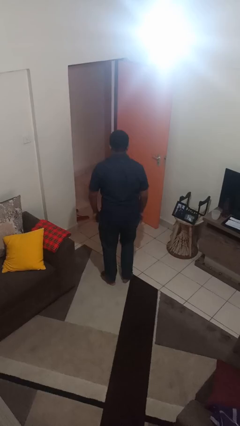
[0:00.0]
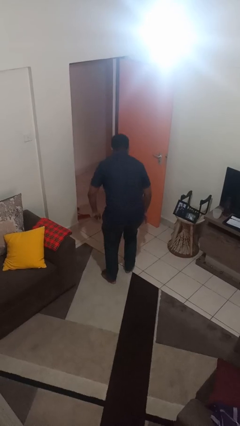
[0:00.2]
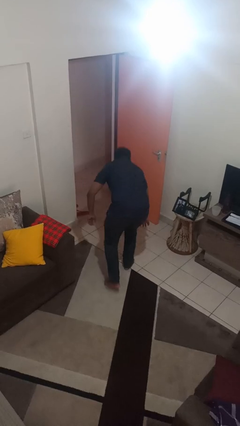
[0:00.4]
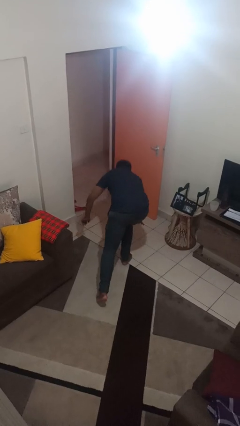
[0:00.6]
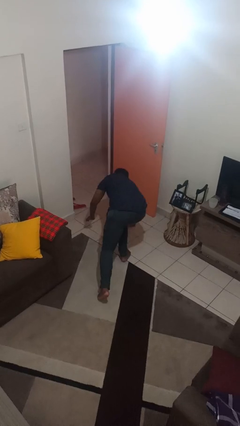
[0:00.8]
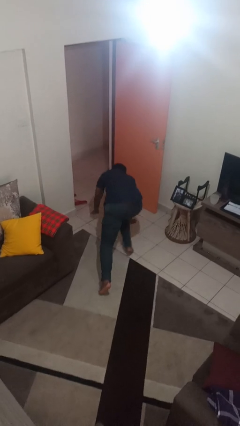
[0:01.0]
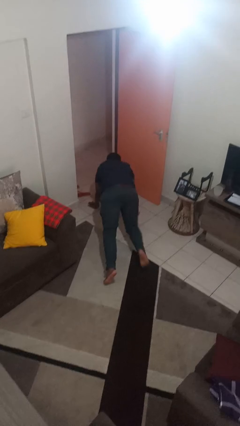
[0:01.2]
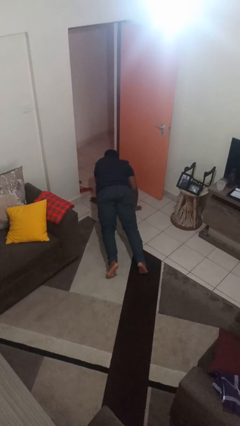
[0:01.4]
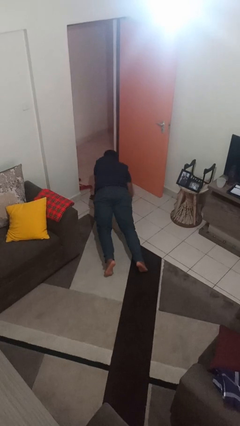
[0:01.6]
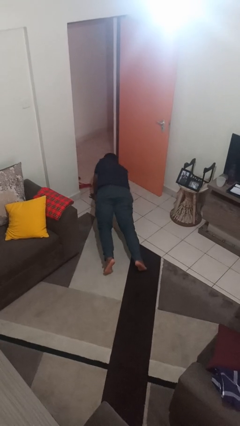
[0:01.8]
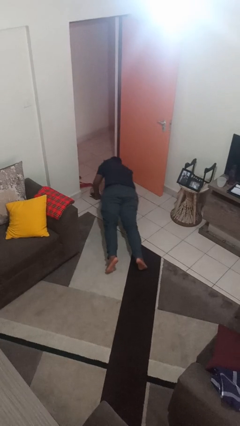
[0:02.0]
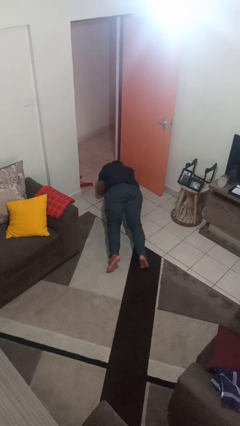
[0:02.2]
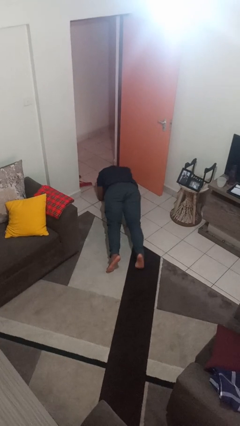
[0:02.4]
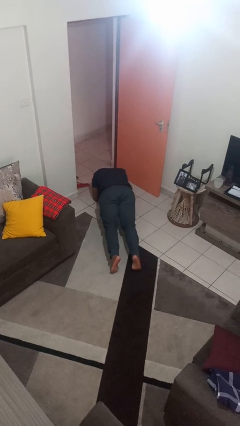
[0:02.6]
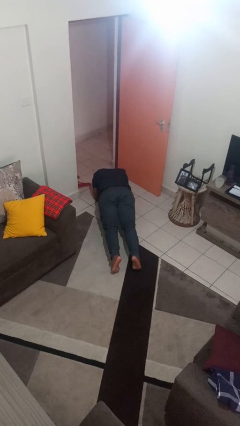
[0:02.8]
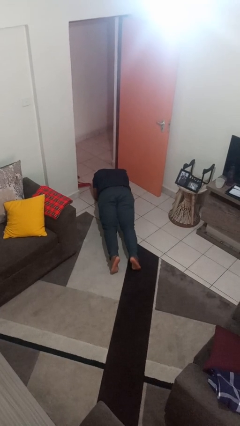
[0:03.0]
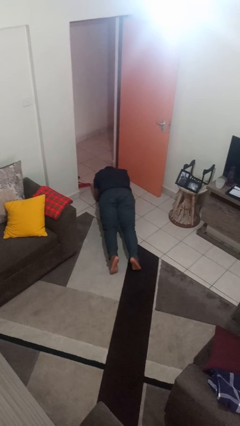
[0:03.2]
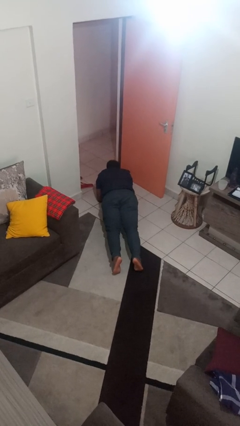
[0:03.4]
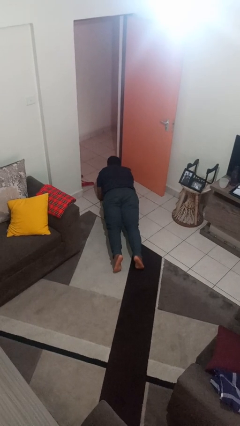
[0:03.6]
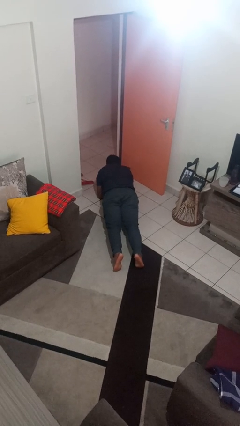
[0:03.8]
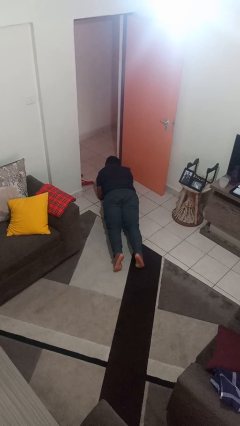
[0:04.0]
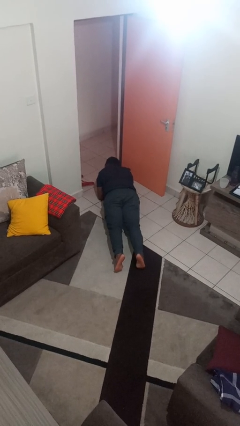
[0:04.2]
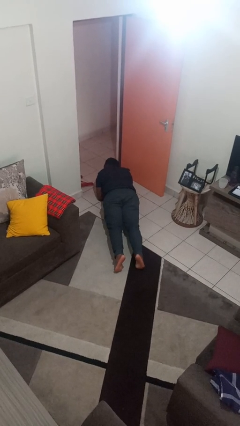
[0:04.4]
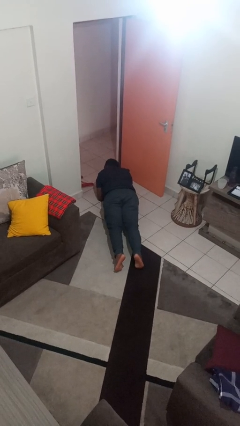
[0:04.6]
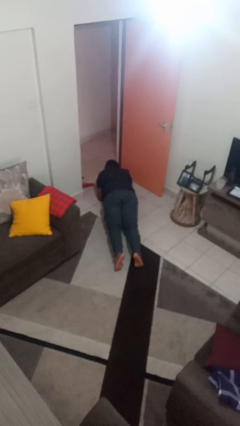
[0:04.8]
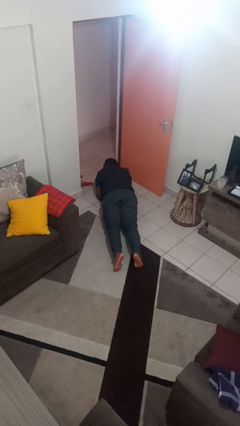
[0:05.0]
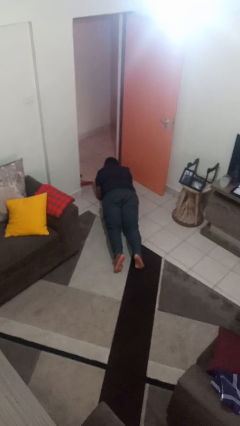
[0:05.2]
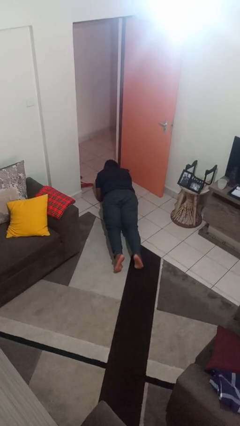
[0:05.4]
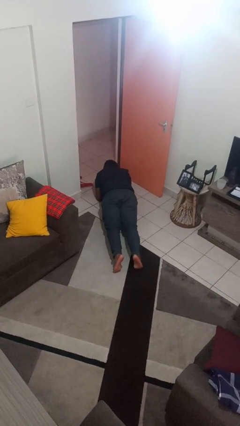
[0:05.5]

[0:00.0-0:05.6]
person exercises with plank

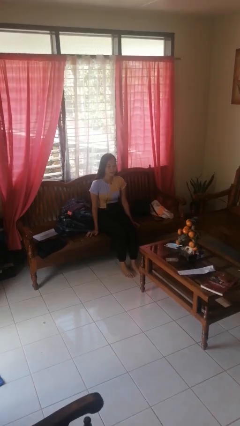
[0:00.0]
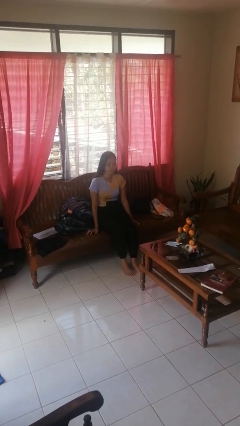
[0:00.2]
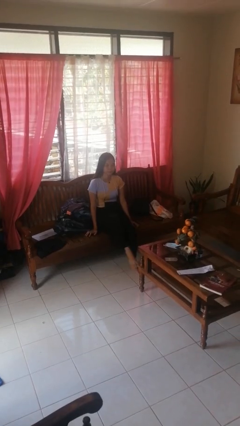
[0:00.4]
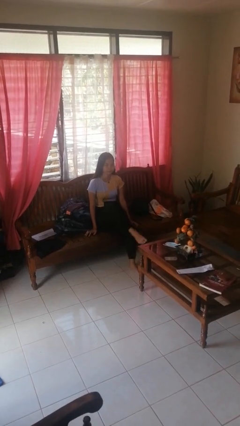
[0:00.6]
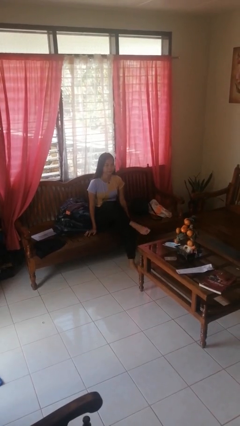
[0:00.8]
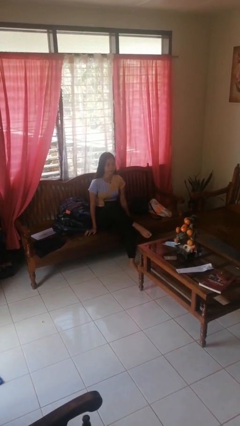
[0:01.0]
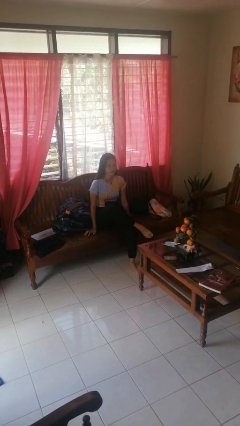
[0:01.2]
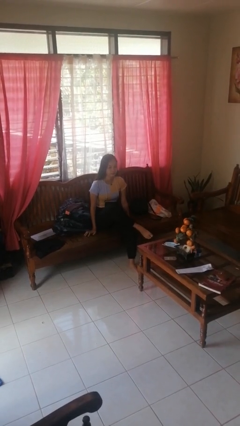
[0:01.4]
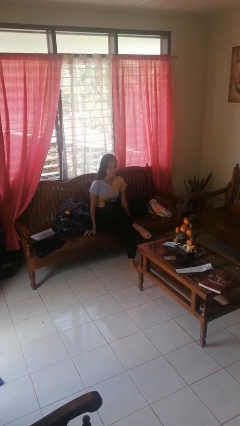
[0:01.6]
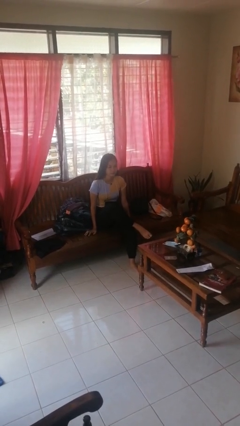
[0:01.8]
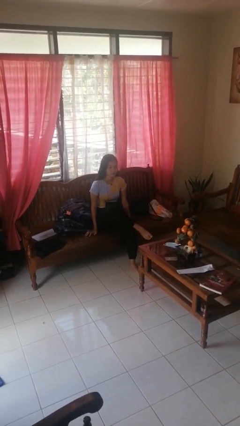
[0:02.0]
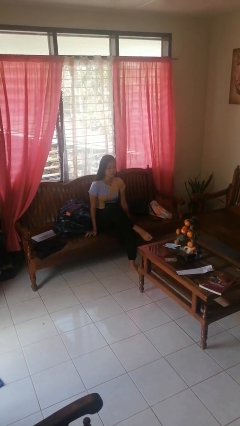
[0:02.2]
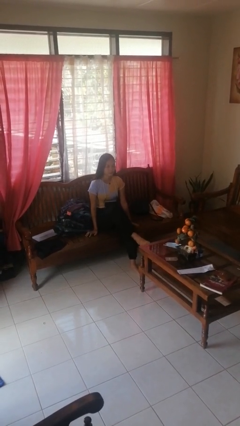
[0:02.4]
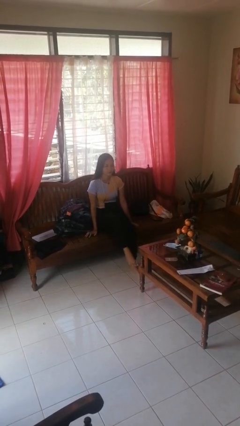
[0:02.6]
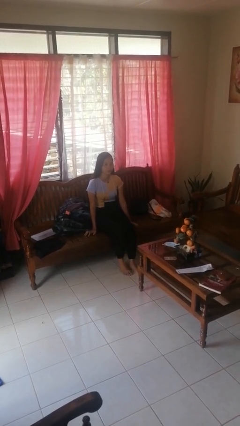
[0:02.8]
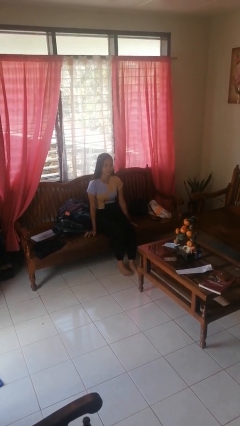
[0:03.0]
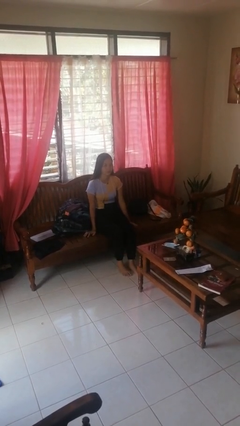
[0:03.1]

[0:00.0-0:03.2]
person crosses legs

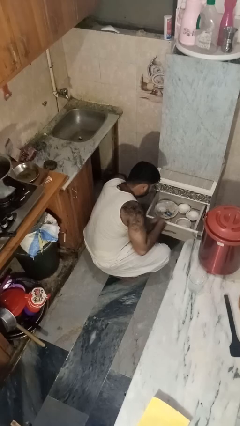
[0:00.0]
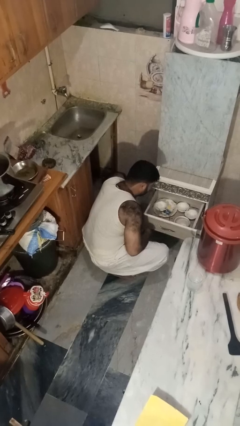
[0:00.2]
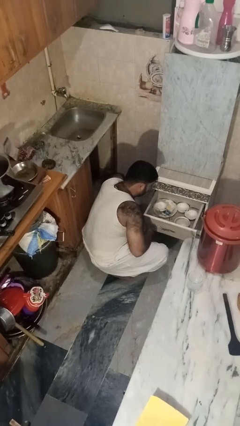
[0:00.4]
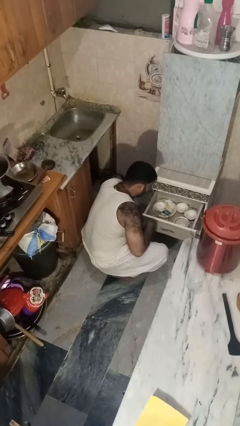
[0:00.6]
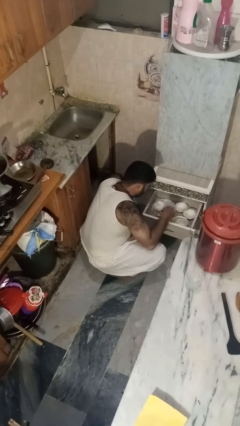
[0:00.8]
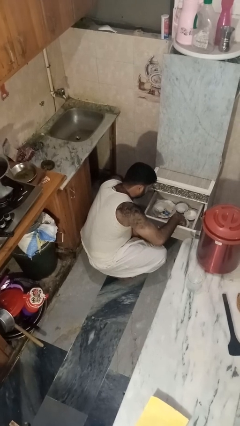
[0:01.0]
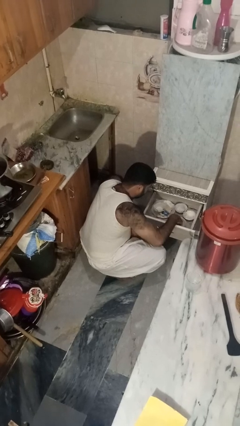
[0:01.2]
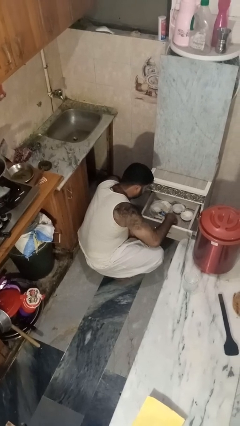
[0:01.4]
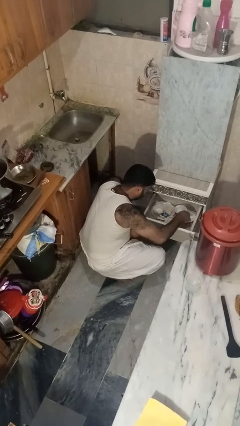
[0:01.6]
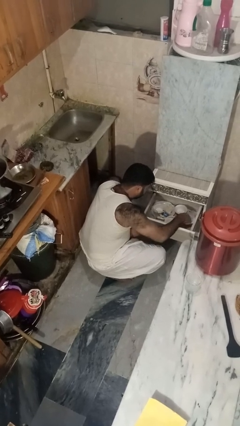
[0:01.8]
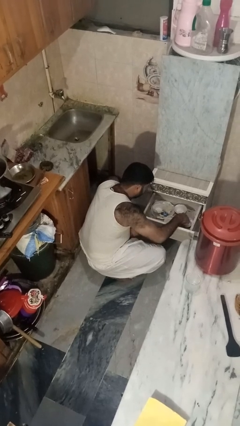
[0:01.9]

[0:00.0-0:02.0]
person searches in kitchen drawer

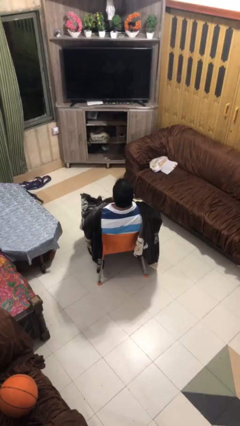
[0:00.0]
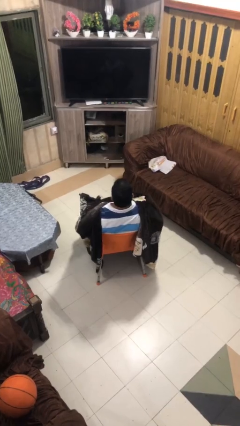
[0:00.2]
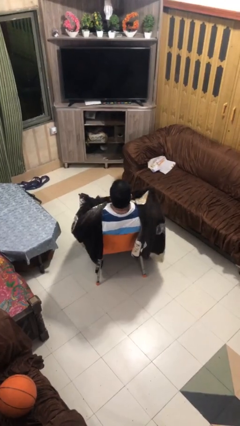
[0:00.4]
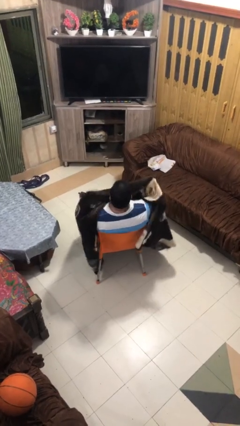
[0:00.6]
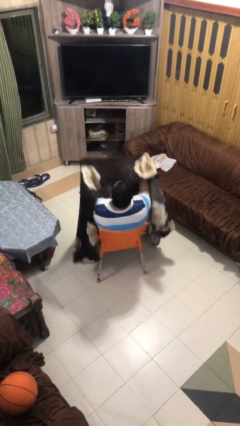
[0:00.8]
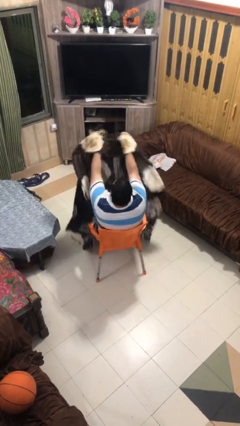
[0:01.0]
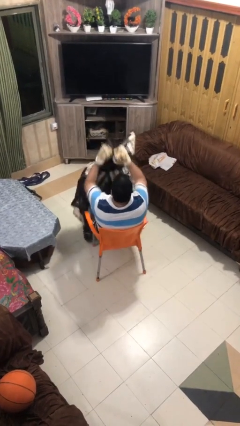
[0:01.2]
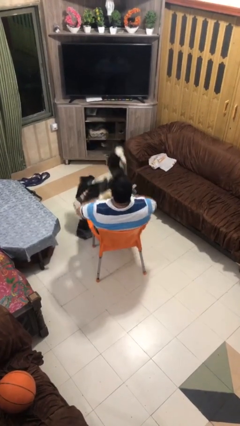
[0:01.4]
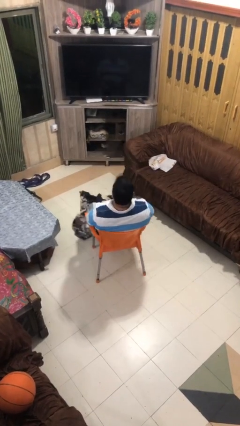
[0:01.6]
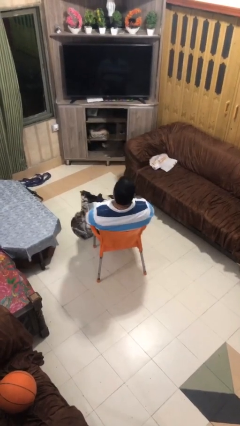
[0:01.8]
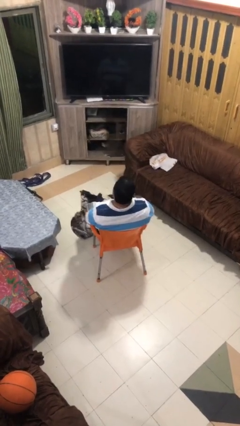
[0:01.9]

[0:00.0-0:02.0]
person uncovers with blanket

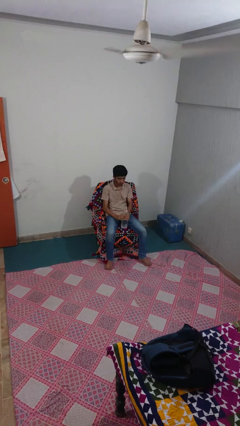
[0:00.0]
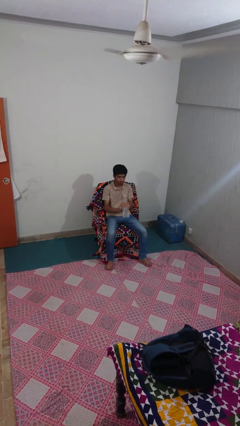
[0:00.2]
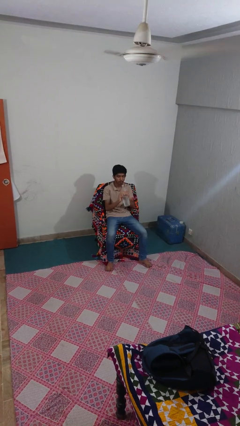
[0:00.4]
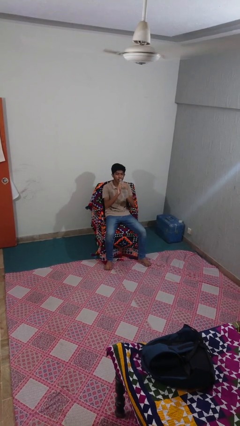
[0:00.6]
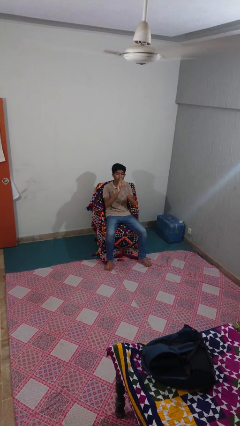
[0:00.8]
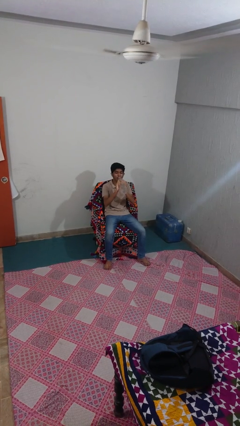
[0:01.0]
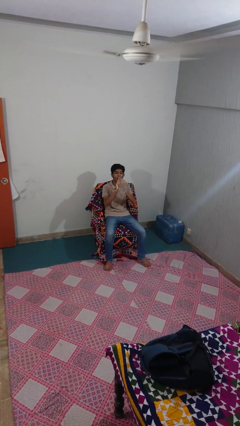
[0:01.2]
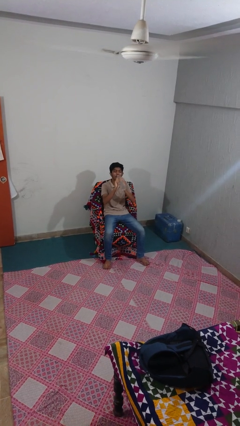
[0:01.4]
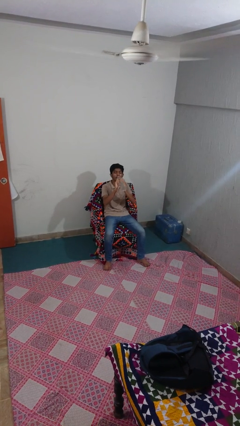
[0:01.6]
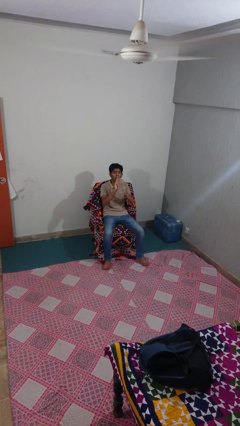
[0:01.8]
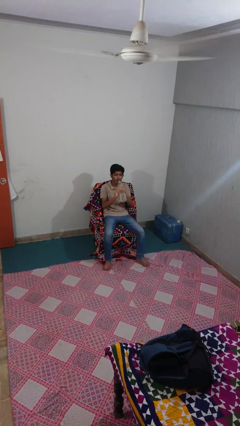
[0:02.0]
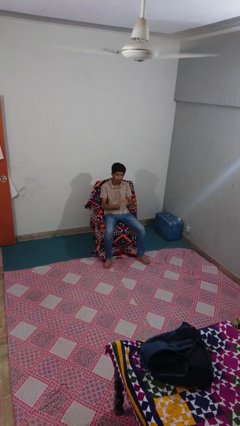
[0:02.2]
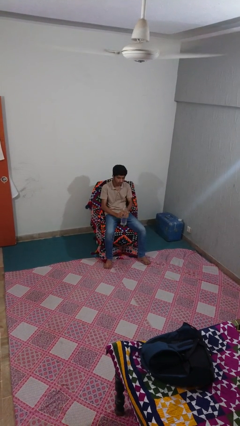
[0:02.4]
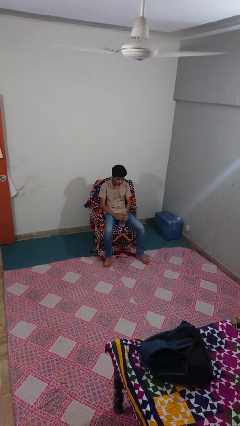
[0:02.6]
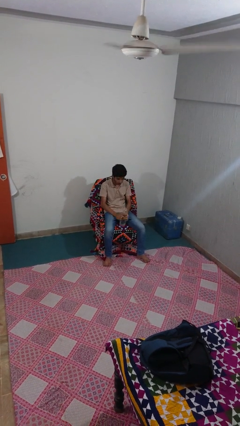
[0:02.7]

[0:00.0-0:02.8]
person drinks from bottle

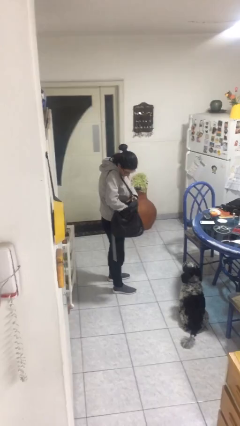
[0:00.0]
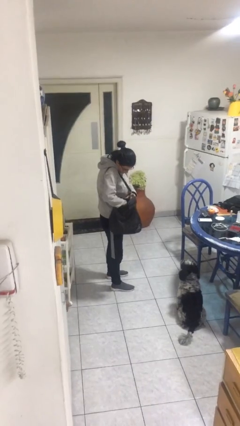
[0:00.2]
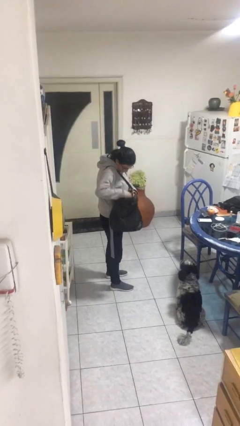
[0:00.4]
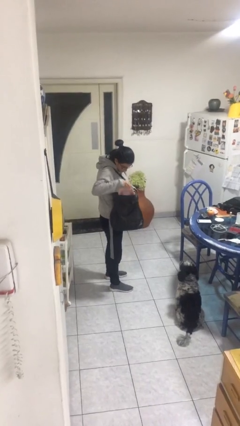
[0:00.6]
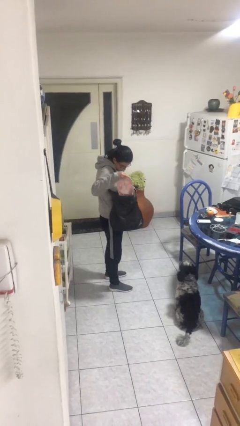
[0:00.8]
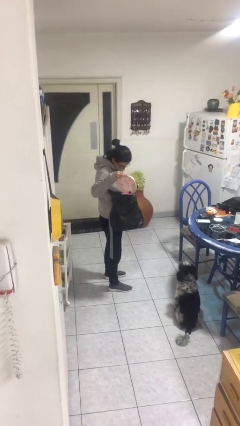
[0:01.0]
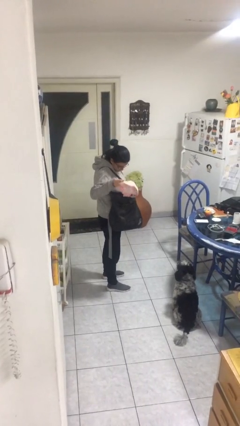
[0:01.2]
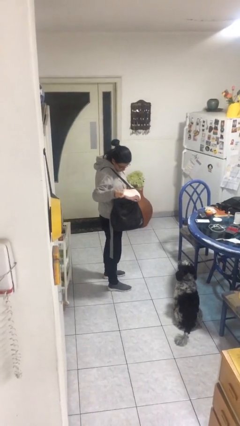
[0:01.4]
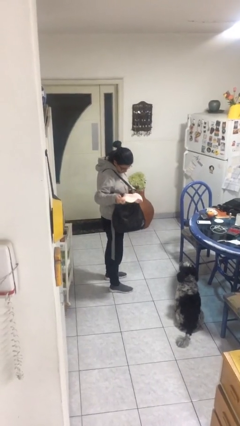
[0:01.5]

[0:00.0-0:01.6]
person takes object from purse
